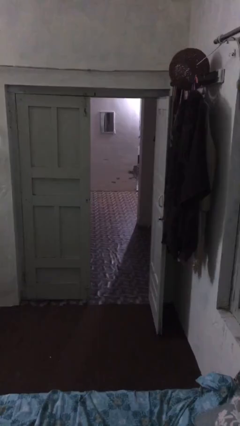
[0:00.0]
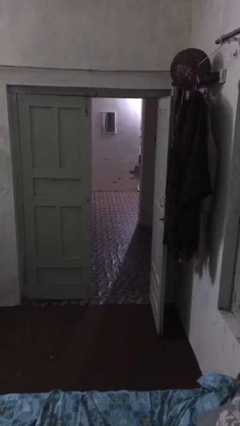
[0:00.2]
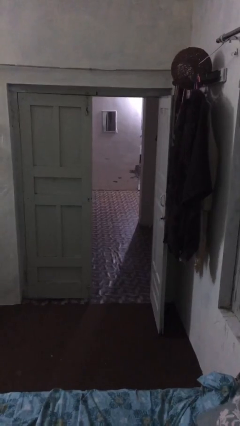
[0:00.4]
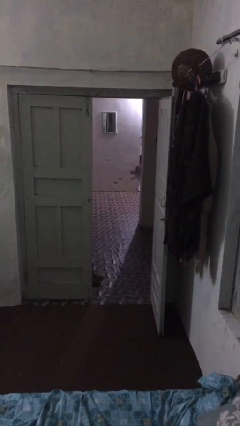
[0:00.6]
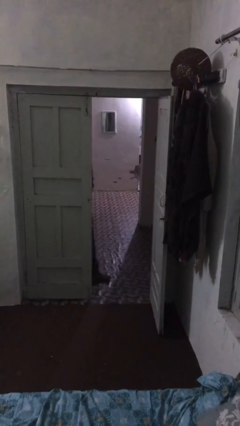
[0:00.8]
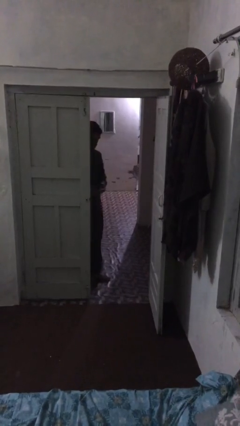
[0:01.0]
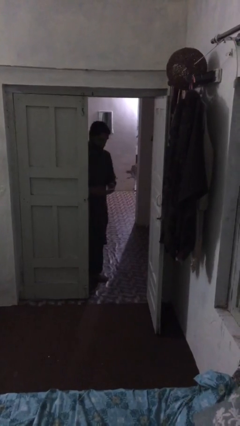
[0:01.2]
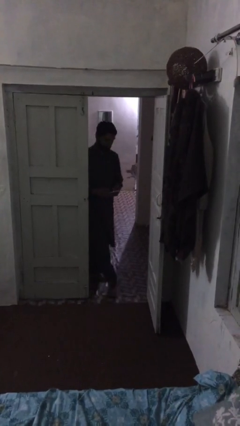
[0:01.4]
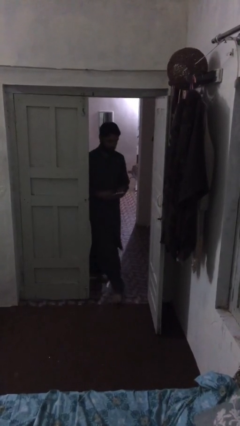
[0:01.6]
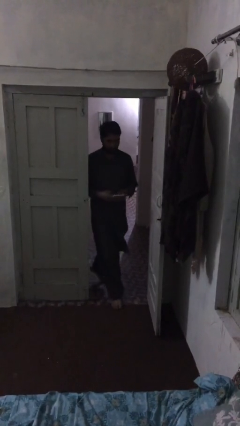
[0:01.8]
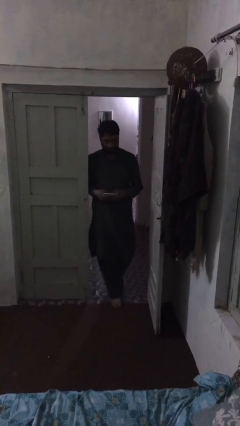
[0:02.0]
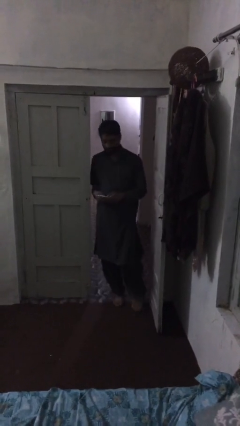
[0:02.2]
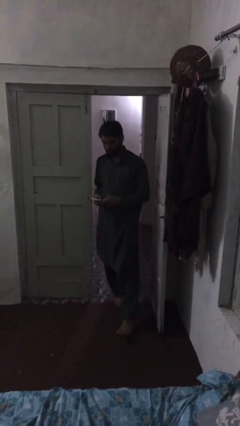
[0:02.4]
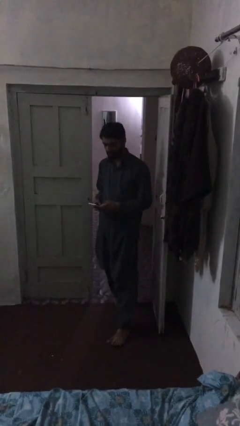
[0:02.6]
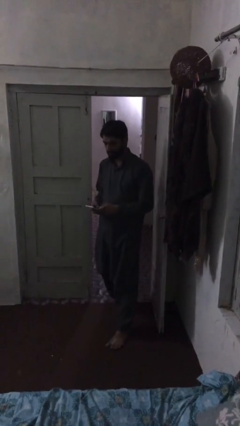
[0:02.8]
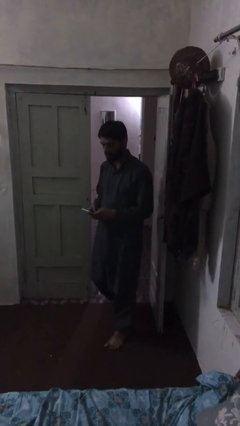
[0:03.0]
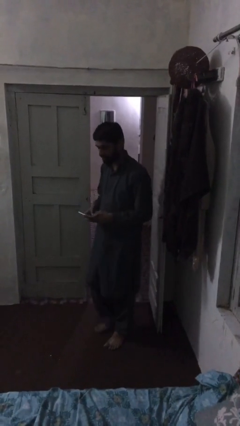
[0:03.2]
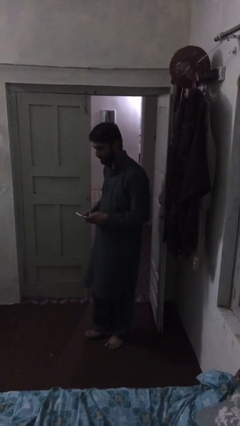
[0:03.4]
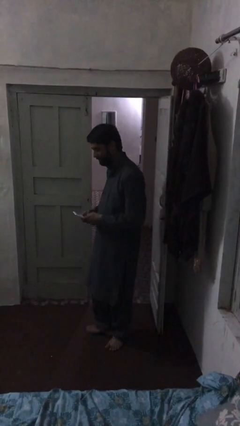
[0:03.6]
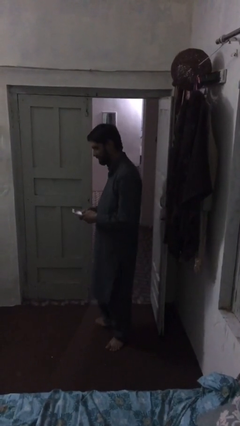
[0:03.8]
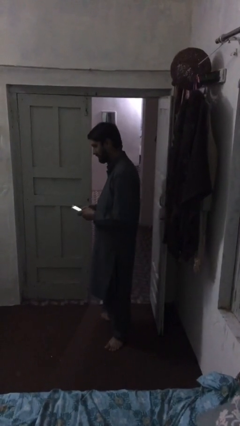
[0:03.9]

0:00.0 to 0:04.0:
person enters scene through structure

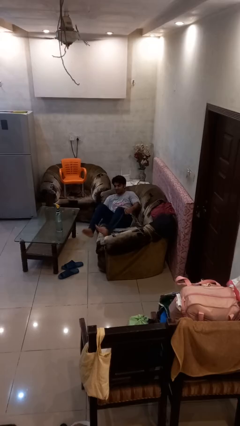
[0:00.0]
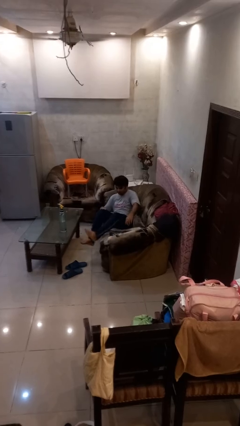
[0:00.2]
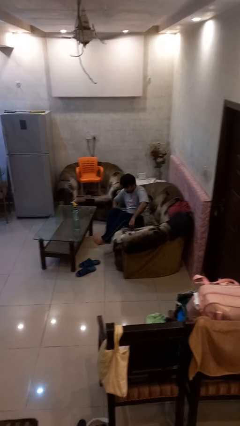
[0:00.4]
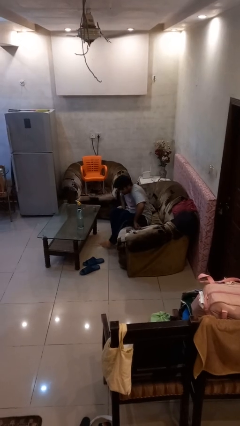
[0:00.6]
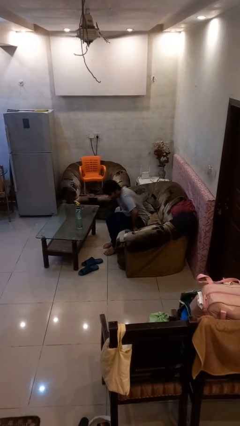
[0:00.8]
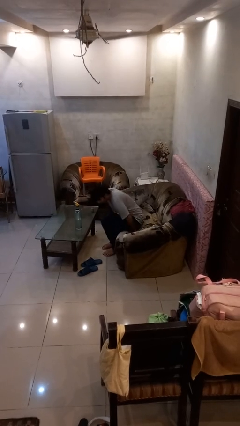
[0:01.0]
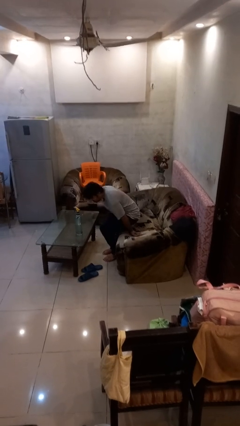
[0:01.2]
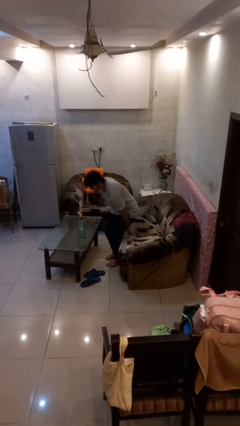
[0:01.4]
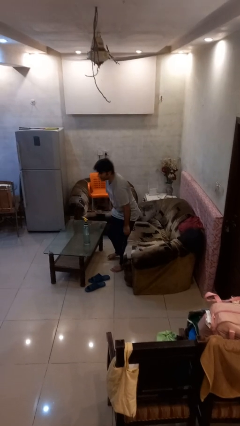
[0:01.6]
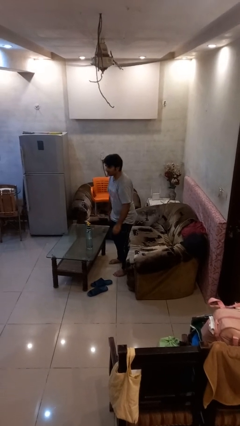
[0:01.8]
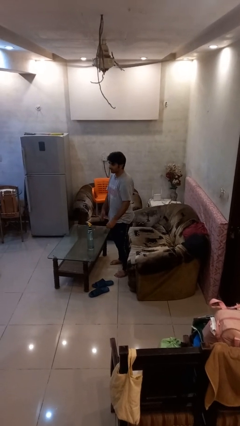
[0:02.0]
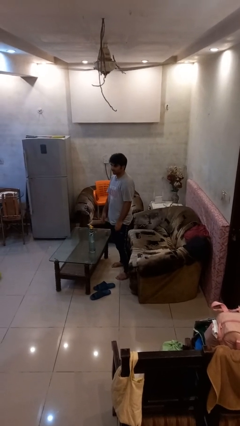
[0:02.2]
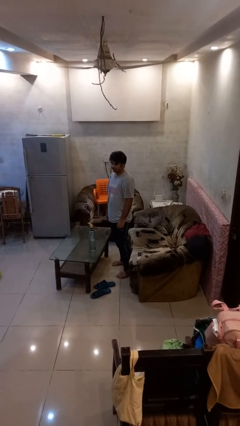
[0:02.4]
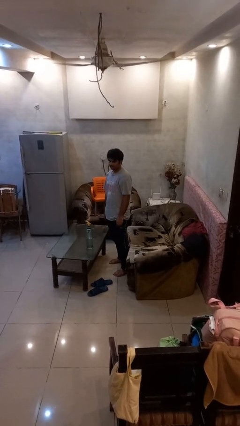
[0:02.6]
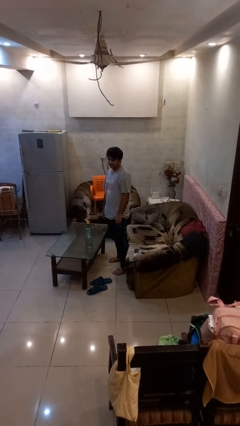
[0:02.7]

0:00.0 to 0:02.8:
person stands up

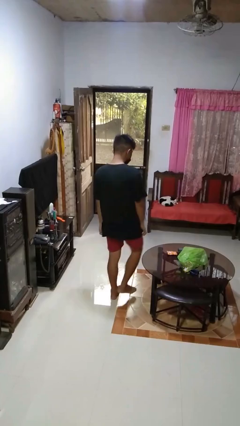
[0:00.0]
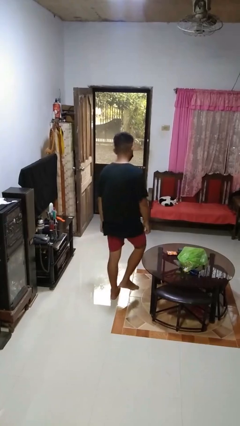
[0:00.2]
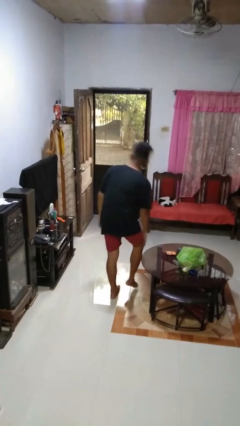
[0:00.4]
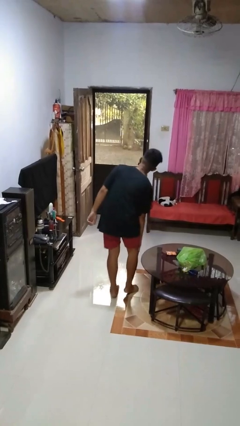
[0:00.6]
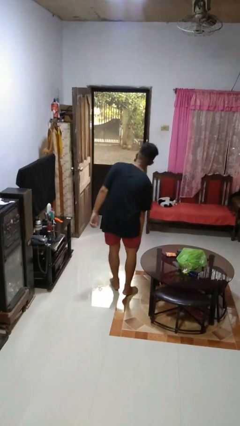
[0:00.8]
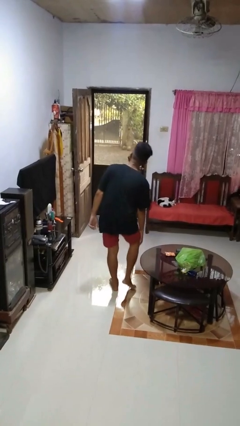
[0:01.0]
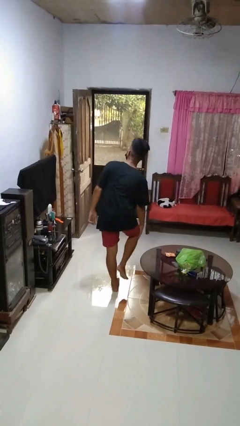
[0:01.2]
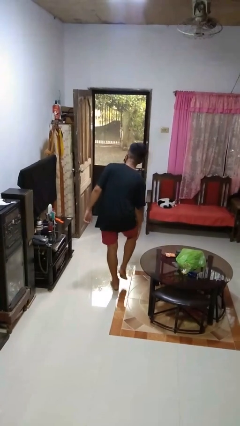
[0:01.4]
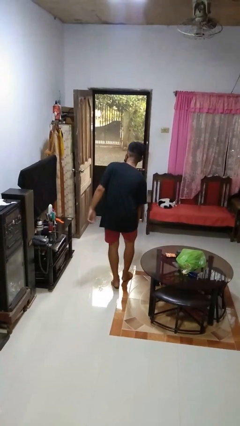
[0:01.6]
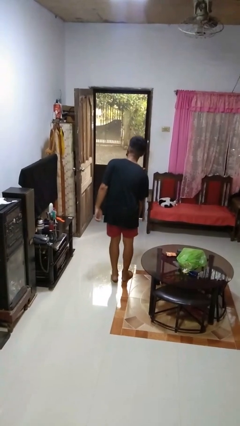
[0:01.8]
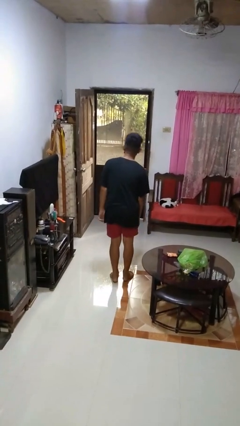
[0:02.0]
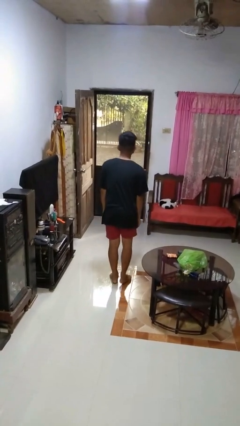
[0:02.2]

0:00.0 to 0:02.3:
person bumps into table

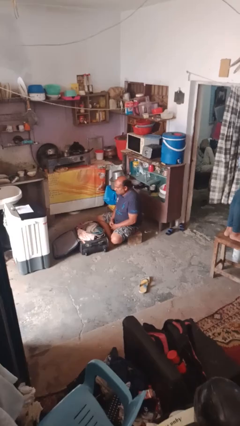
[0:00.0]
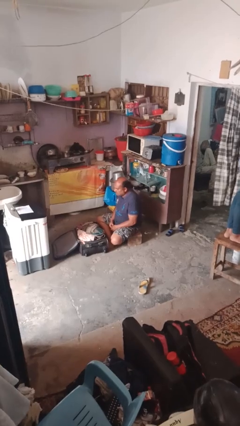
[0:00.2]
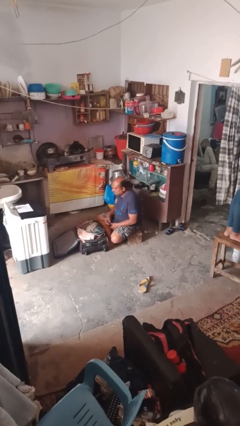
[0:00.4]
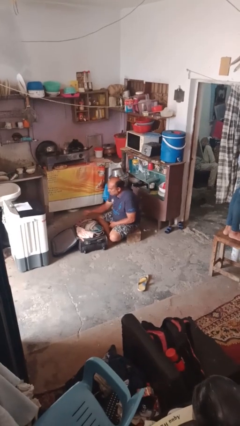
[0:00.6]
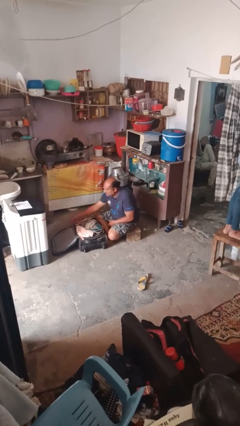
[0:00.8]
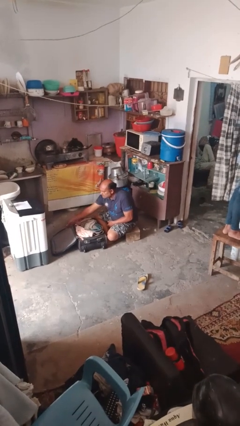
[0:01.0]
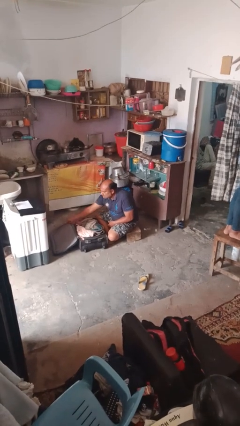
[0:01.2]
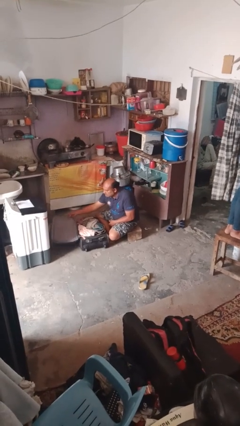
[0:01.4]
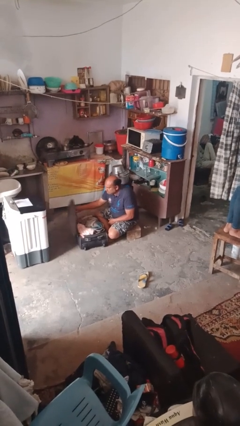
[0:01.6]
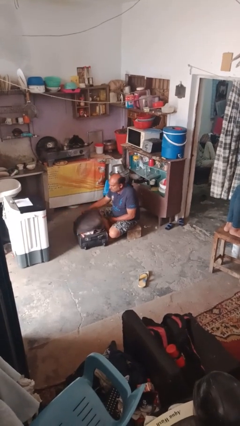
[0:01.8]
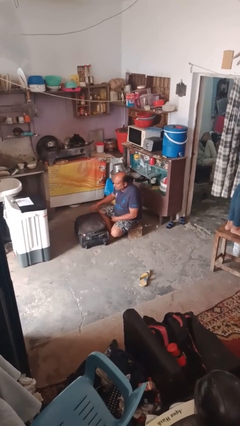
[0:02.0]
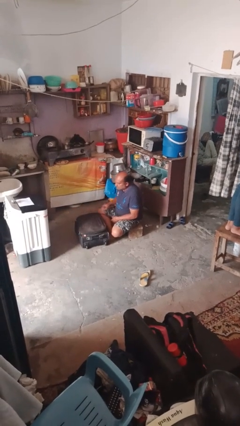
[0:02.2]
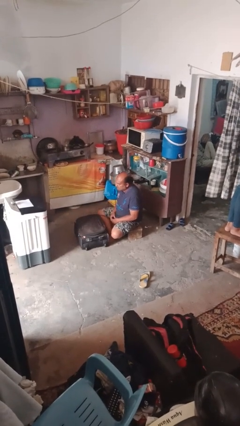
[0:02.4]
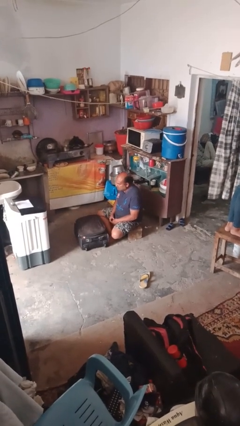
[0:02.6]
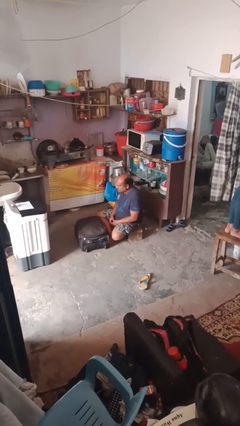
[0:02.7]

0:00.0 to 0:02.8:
person closes suitcase

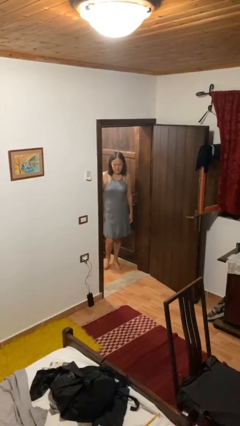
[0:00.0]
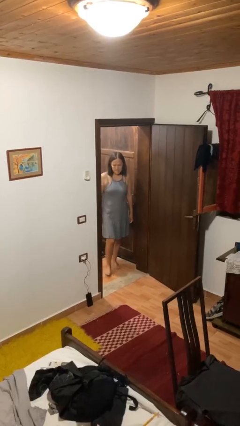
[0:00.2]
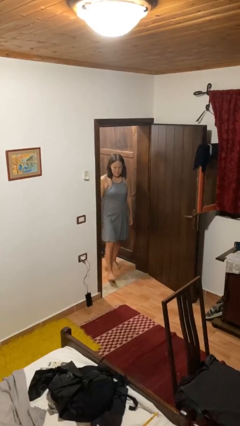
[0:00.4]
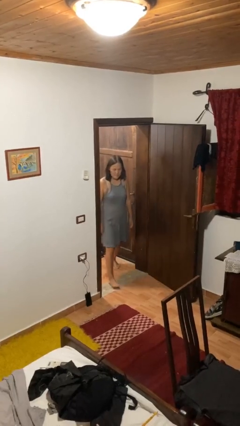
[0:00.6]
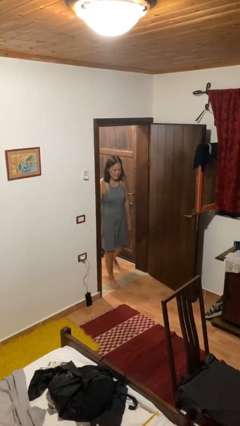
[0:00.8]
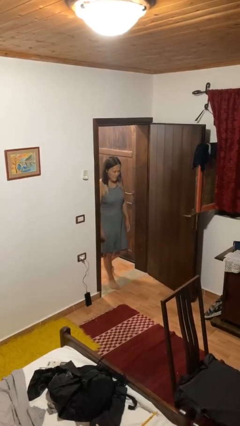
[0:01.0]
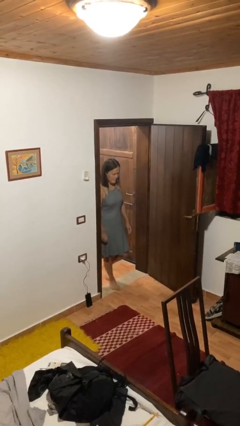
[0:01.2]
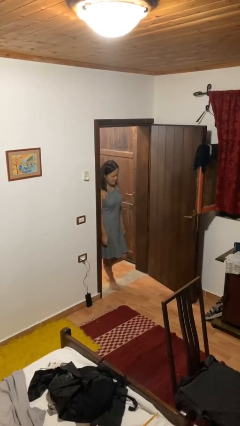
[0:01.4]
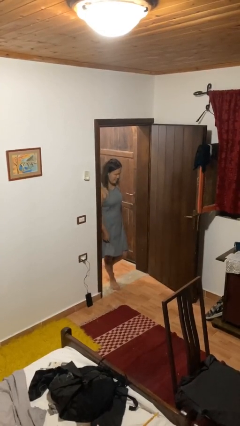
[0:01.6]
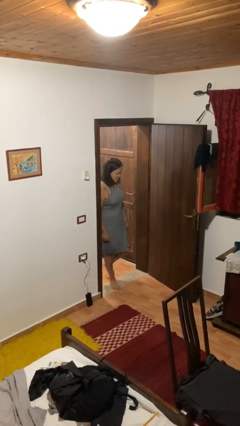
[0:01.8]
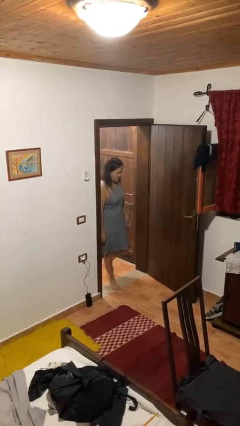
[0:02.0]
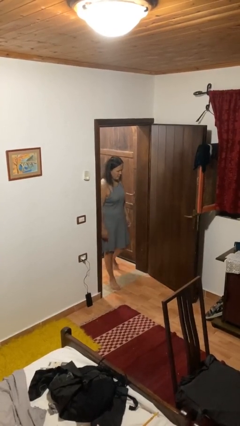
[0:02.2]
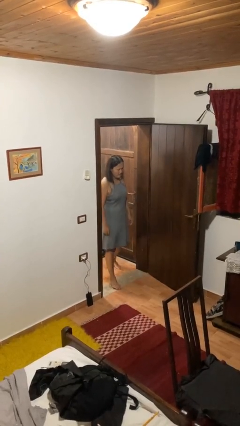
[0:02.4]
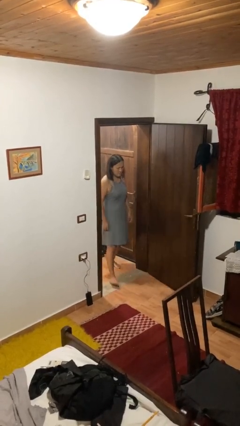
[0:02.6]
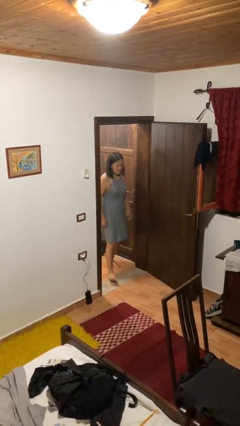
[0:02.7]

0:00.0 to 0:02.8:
person bumps into wall

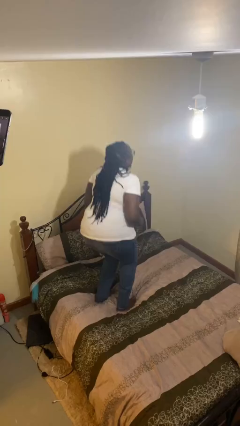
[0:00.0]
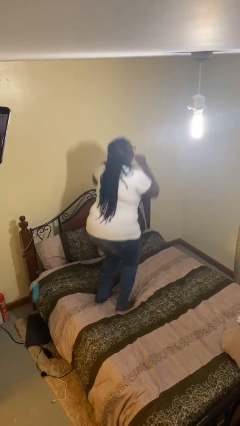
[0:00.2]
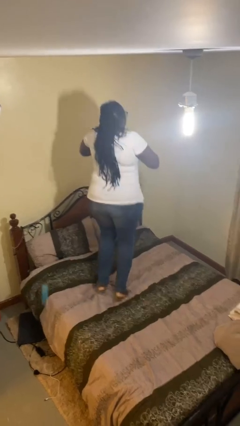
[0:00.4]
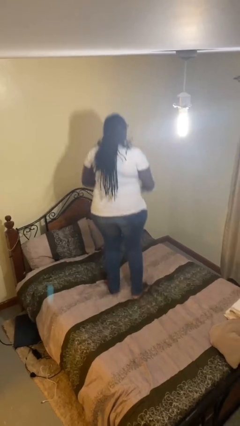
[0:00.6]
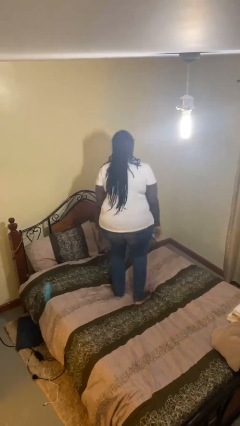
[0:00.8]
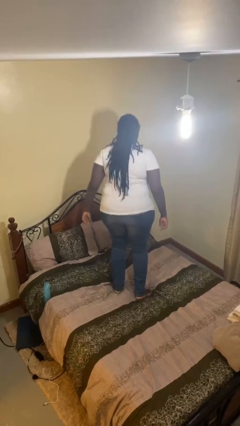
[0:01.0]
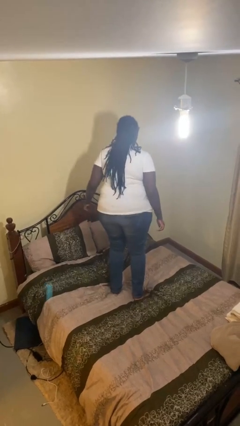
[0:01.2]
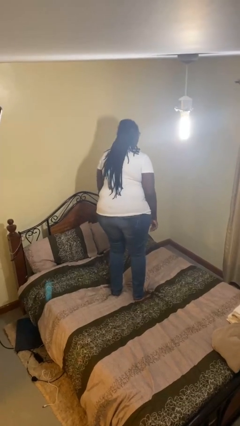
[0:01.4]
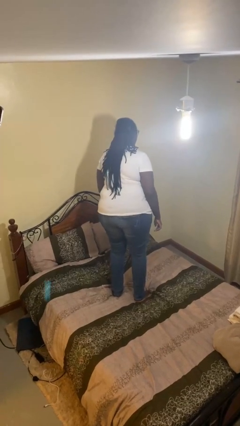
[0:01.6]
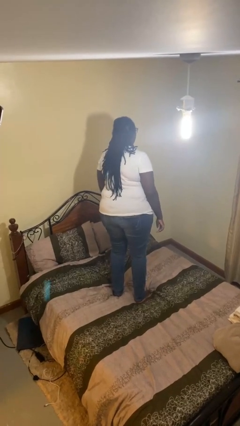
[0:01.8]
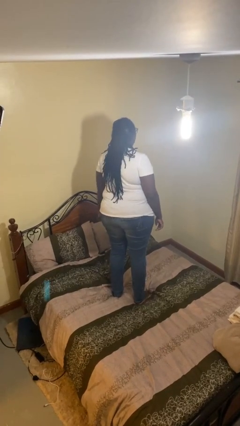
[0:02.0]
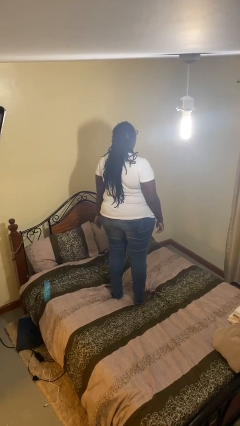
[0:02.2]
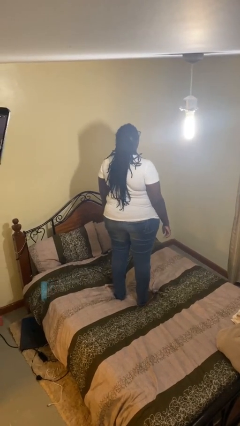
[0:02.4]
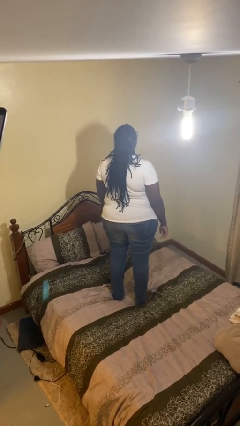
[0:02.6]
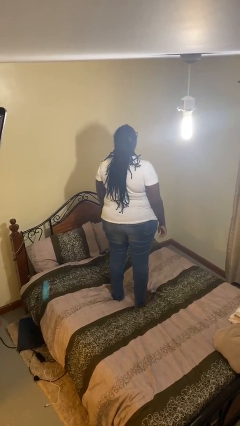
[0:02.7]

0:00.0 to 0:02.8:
person jumps on bed

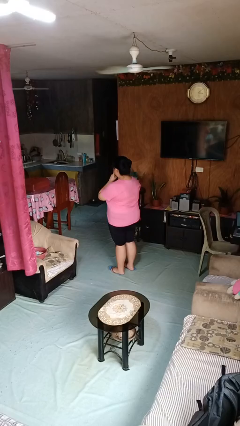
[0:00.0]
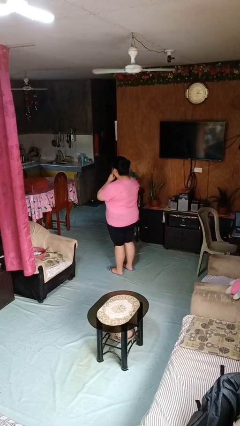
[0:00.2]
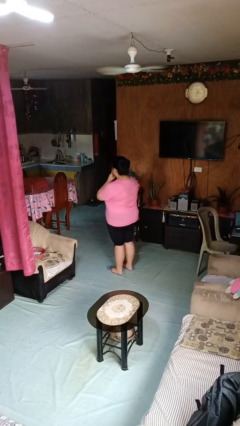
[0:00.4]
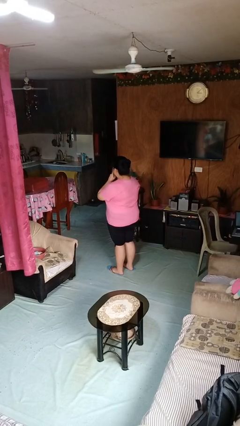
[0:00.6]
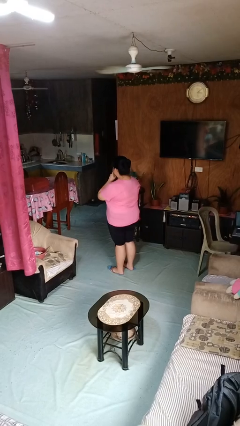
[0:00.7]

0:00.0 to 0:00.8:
person gestures blow kiss
